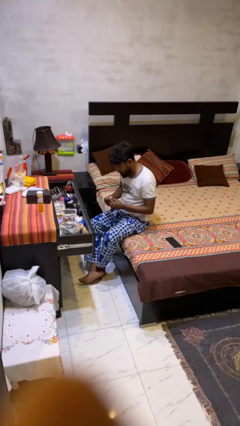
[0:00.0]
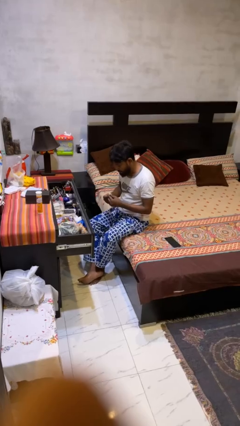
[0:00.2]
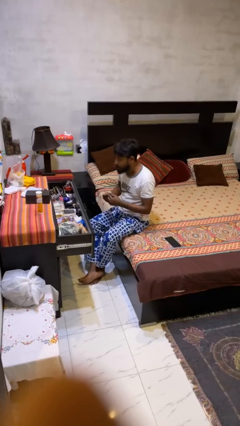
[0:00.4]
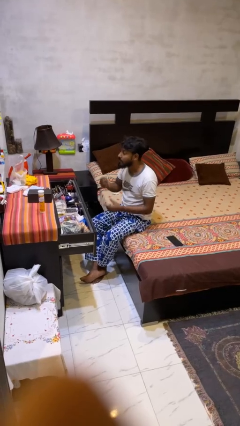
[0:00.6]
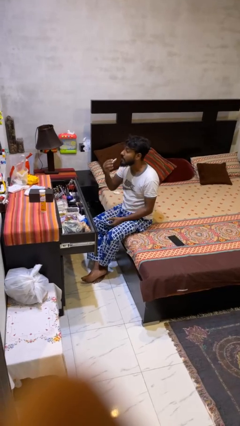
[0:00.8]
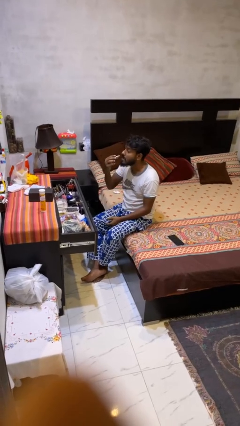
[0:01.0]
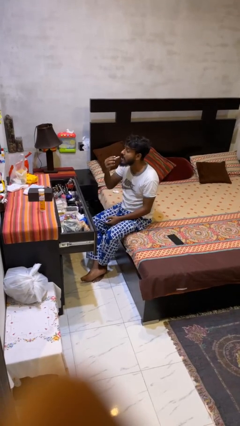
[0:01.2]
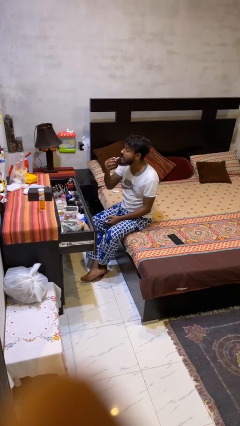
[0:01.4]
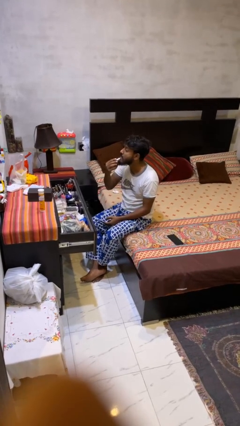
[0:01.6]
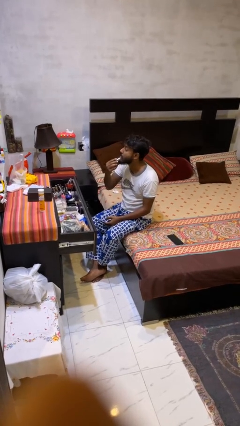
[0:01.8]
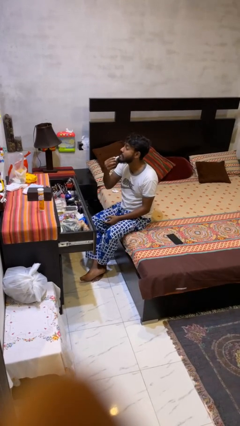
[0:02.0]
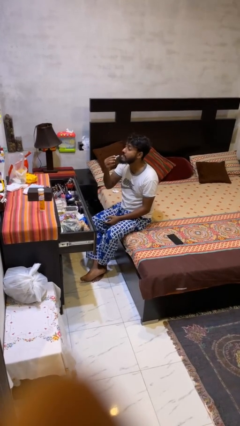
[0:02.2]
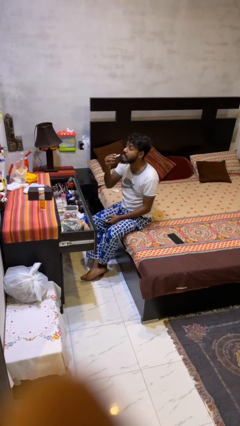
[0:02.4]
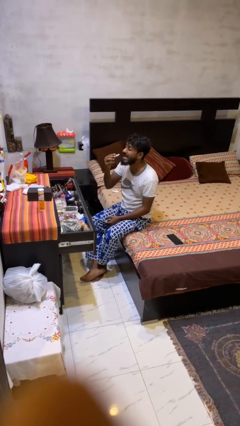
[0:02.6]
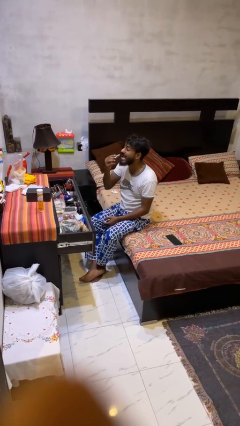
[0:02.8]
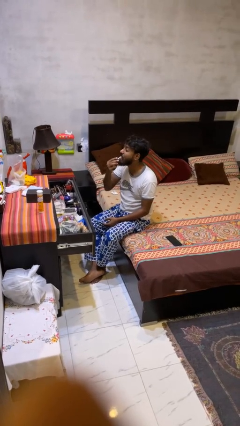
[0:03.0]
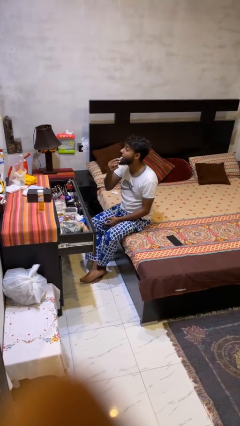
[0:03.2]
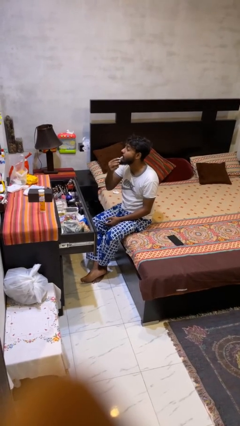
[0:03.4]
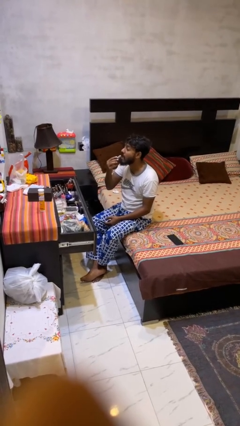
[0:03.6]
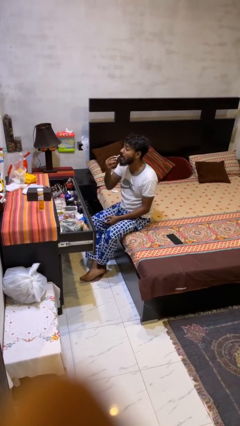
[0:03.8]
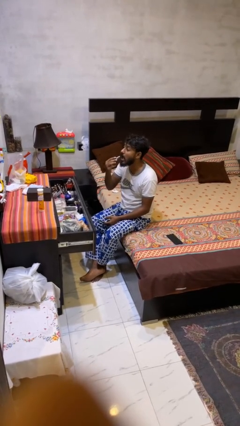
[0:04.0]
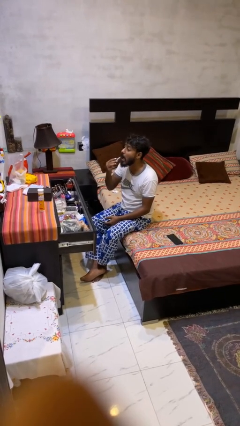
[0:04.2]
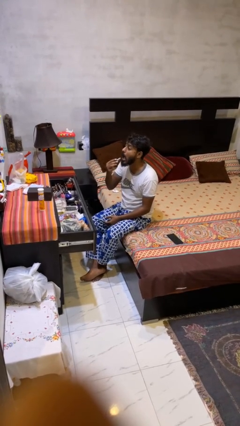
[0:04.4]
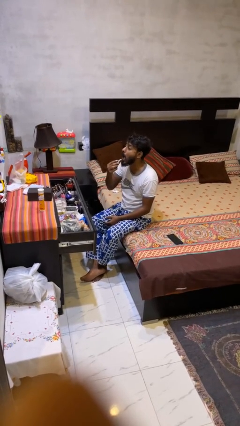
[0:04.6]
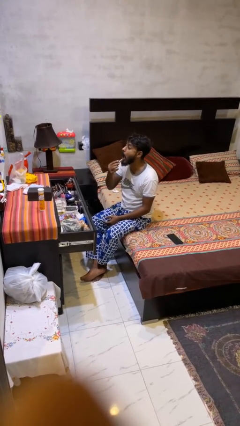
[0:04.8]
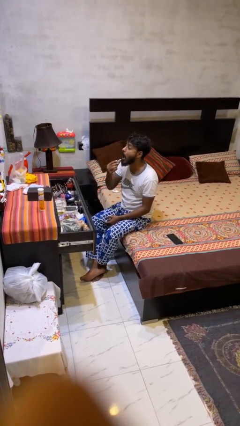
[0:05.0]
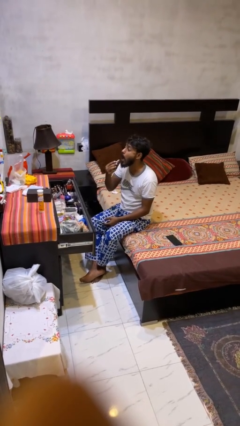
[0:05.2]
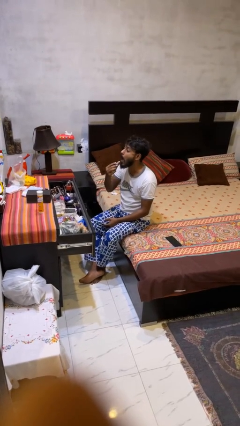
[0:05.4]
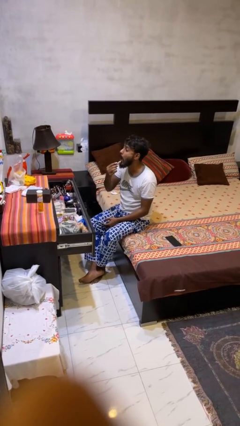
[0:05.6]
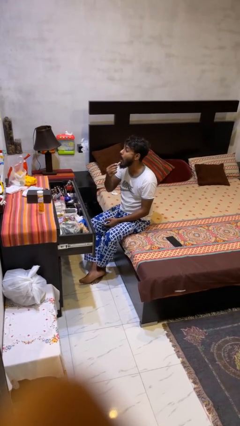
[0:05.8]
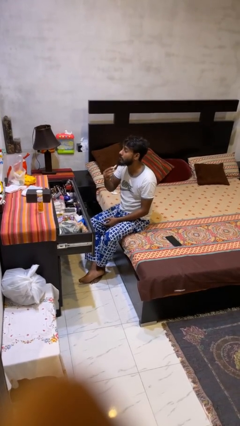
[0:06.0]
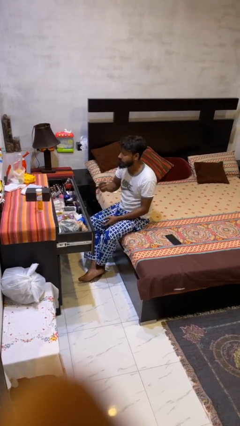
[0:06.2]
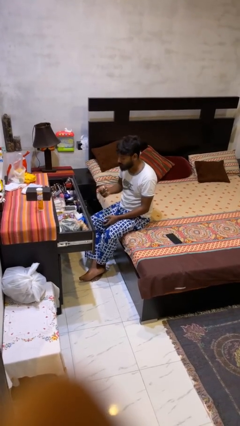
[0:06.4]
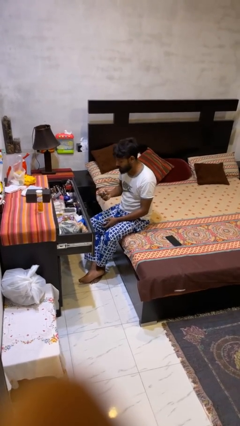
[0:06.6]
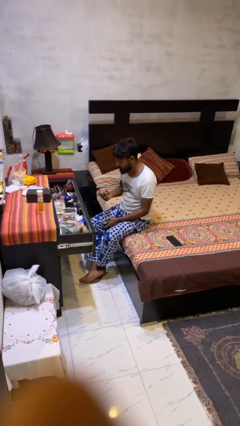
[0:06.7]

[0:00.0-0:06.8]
person applies lip makeup

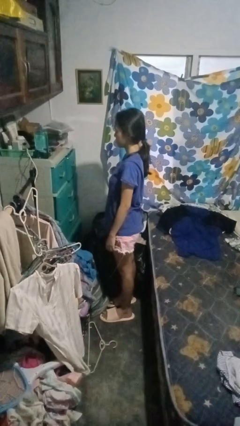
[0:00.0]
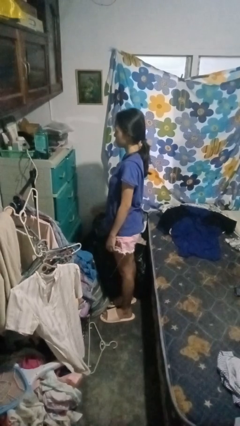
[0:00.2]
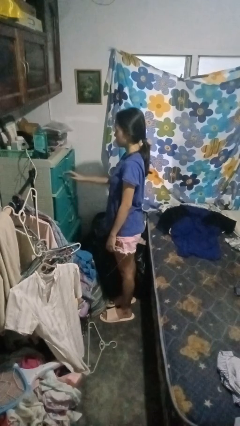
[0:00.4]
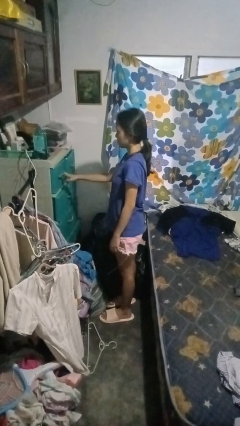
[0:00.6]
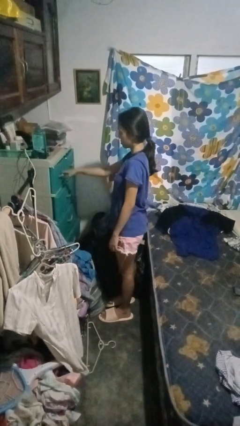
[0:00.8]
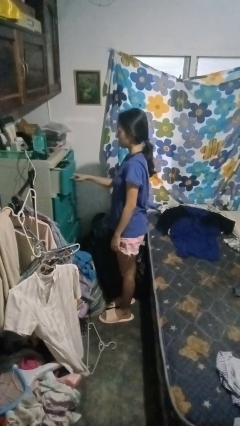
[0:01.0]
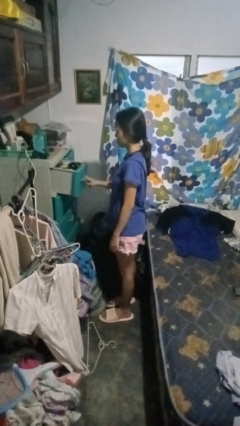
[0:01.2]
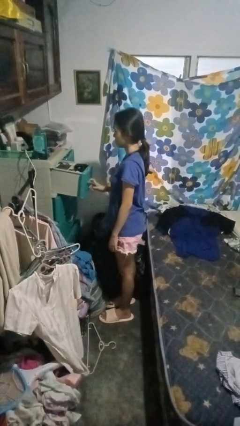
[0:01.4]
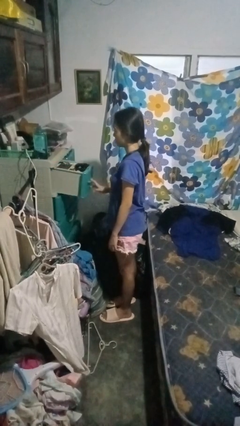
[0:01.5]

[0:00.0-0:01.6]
person opens dresser drawer

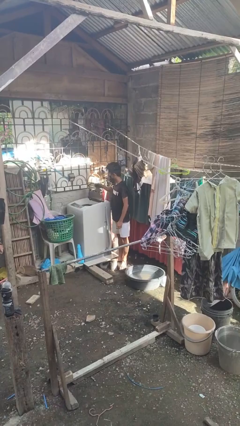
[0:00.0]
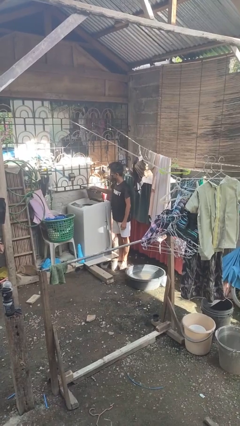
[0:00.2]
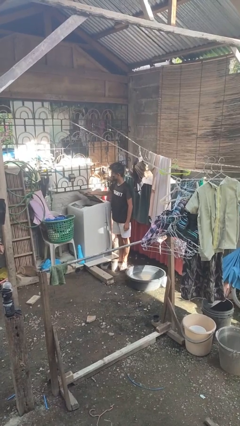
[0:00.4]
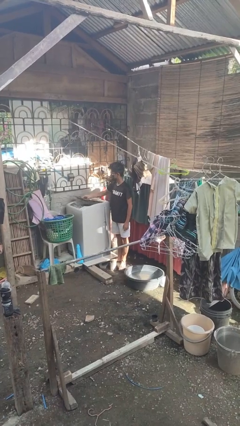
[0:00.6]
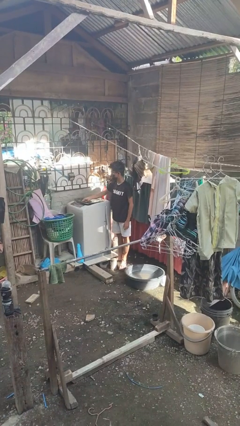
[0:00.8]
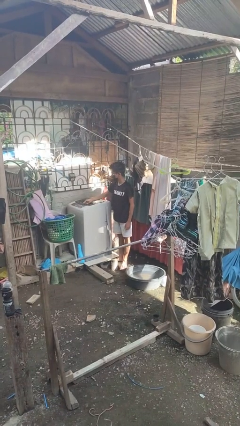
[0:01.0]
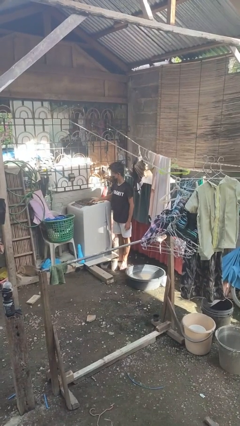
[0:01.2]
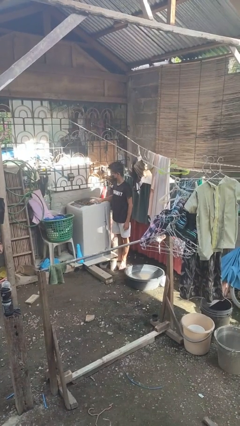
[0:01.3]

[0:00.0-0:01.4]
person closes clothes washer

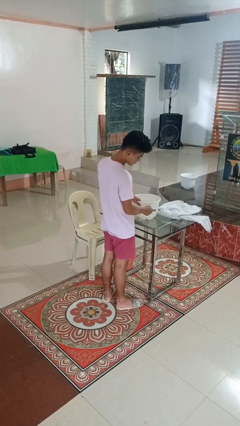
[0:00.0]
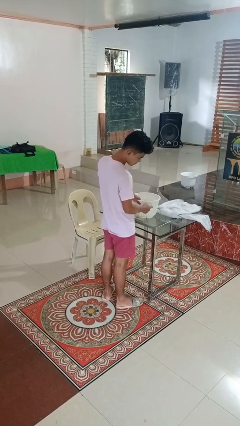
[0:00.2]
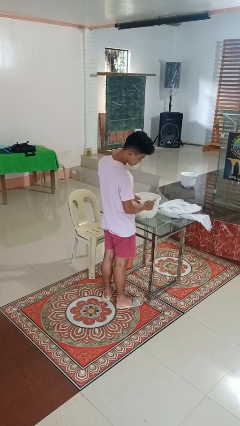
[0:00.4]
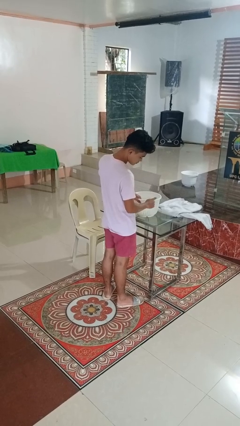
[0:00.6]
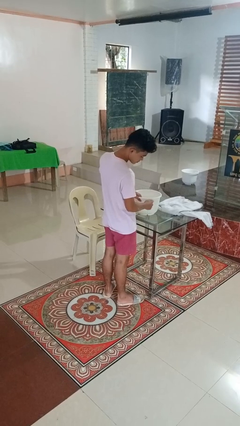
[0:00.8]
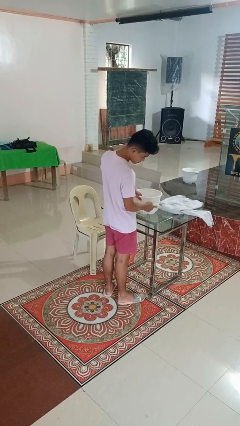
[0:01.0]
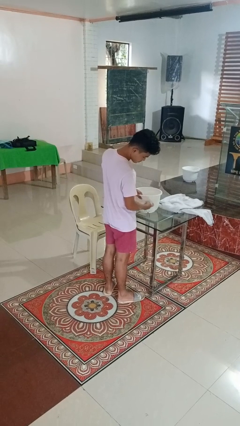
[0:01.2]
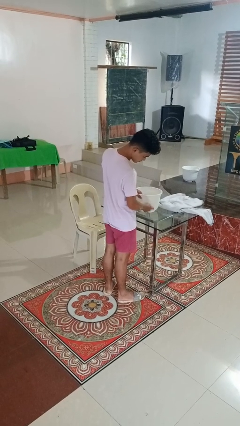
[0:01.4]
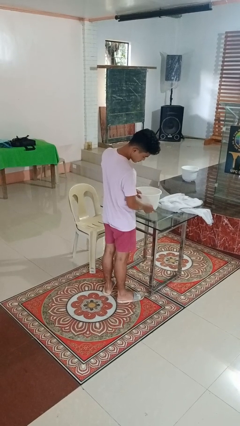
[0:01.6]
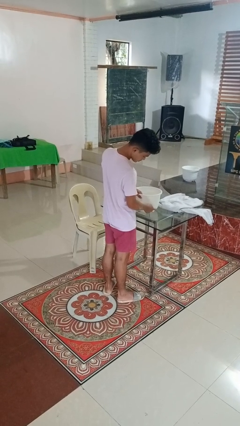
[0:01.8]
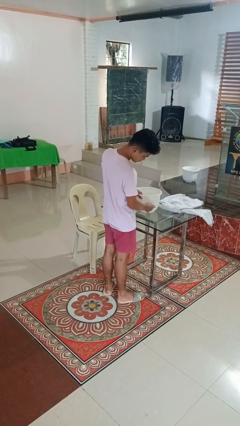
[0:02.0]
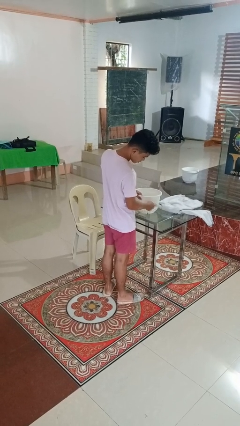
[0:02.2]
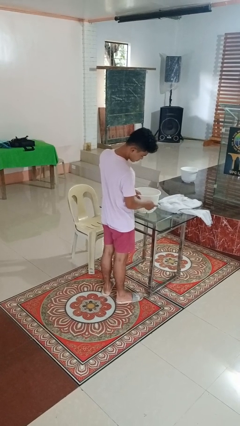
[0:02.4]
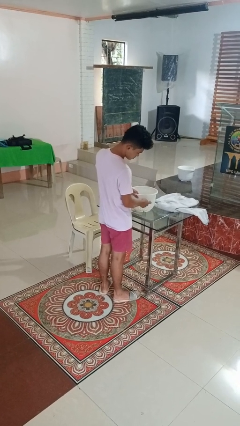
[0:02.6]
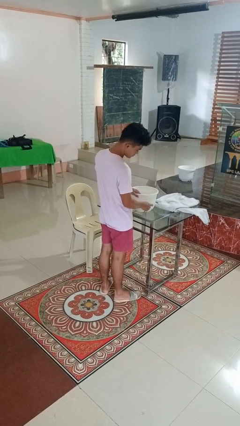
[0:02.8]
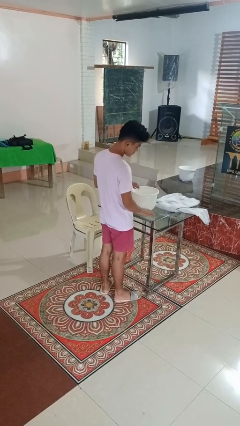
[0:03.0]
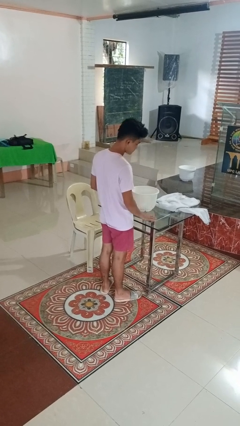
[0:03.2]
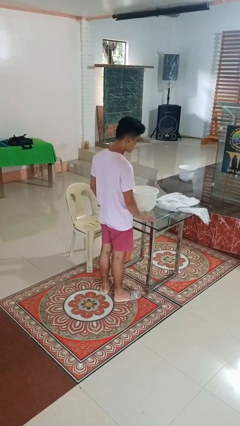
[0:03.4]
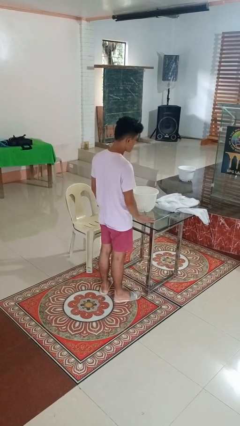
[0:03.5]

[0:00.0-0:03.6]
person taps object with finger

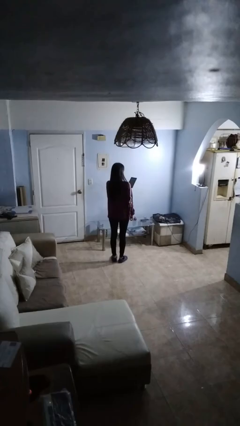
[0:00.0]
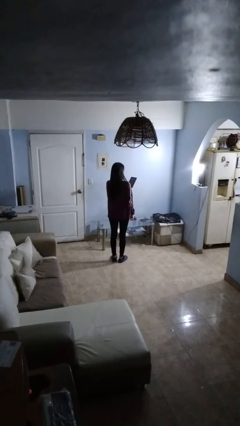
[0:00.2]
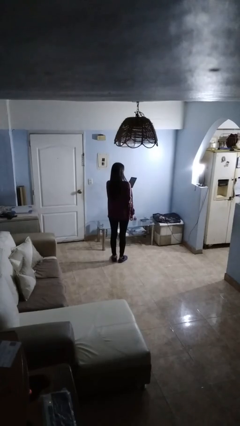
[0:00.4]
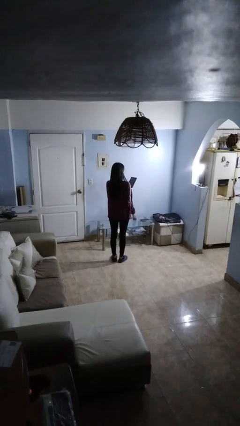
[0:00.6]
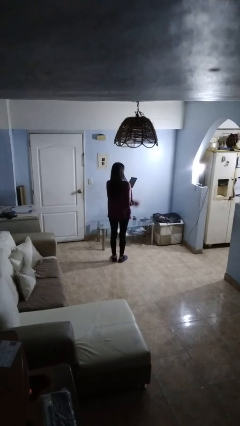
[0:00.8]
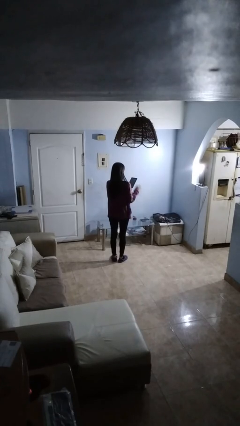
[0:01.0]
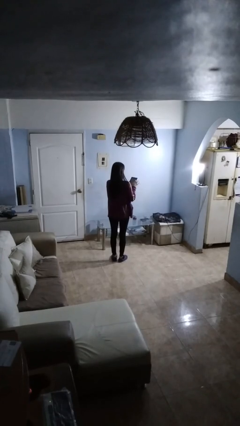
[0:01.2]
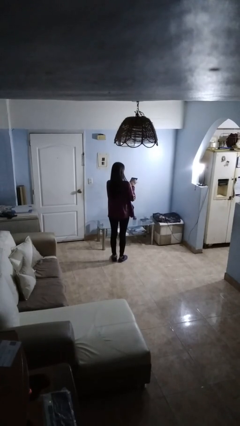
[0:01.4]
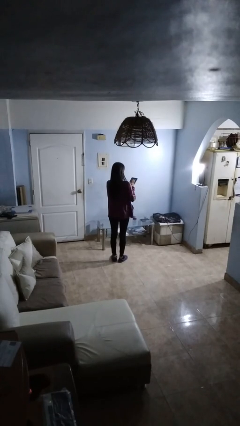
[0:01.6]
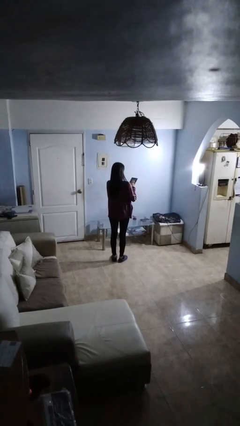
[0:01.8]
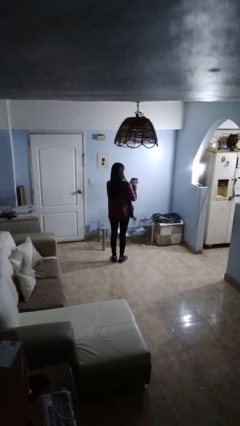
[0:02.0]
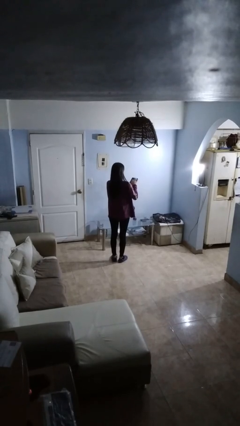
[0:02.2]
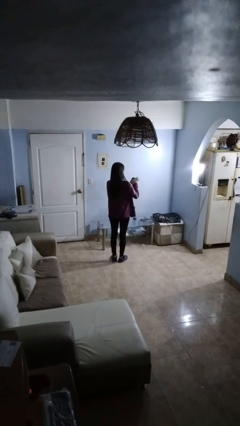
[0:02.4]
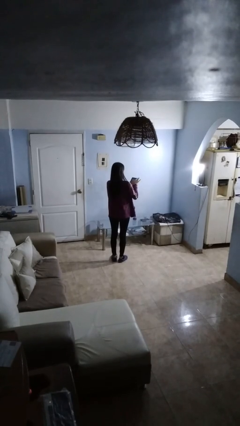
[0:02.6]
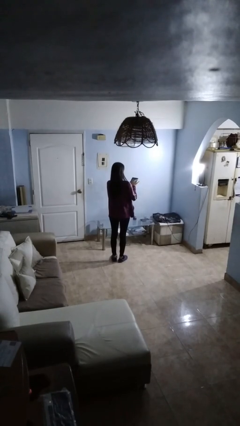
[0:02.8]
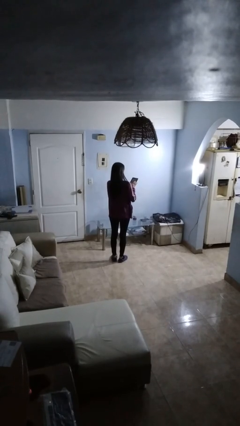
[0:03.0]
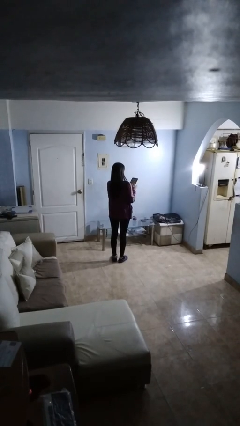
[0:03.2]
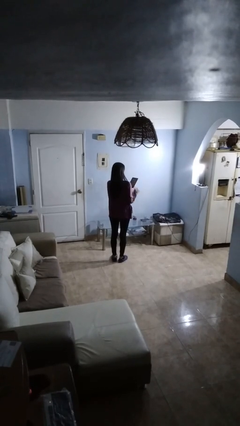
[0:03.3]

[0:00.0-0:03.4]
person interacts with tablet

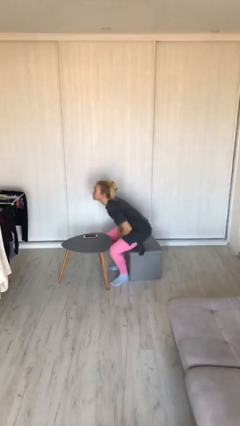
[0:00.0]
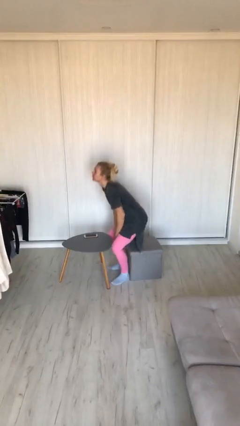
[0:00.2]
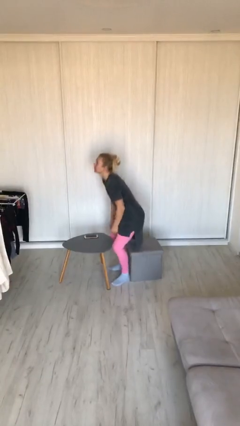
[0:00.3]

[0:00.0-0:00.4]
person stands up

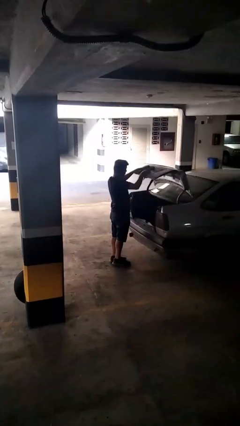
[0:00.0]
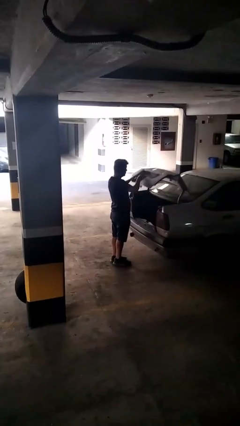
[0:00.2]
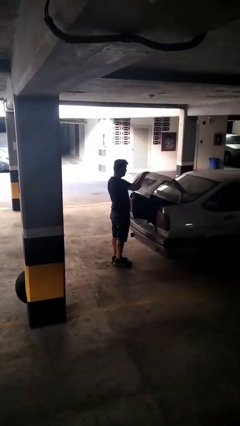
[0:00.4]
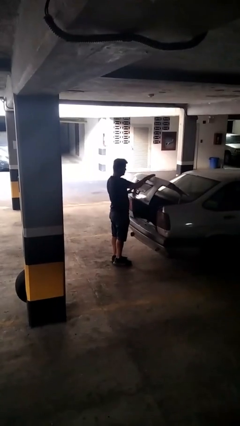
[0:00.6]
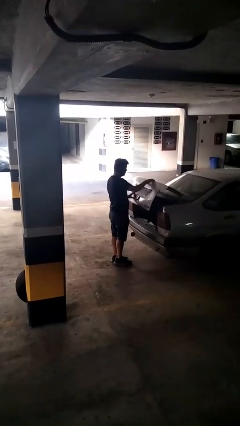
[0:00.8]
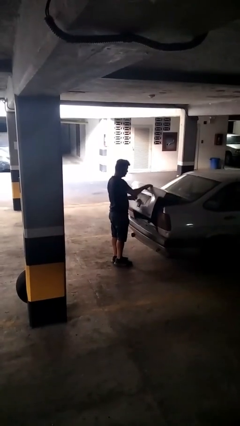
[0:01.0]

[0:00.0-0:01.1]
person closes car trunk
